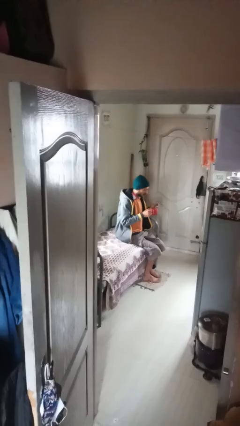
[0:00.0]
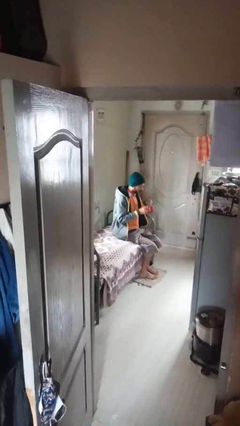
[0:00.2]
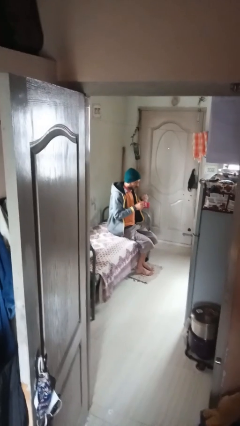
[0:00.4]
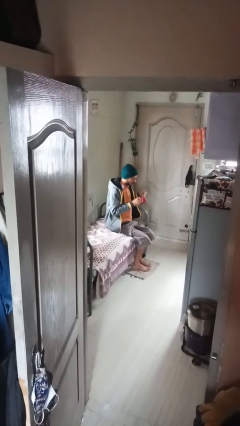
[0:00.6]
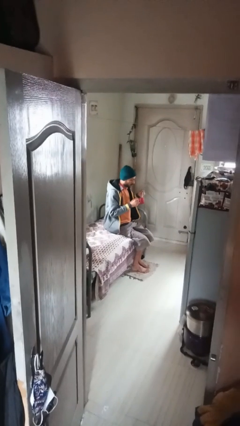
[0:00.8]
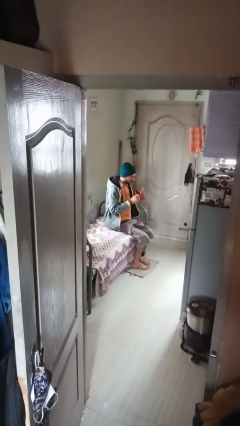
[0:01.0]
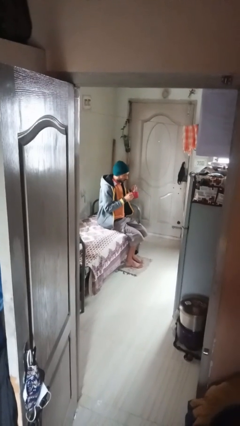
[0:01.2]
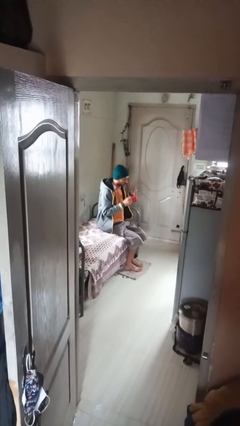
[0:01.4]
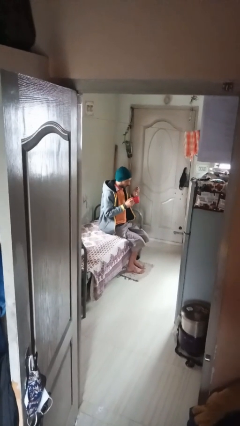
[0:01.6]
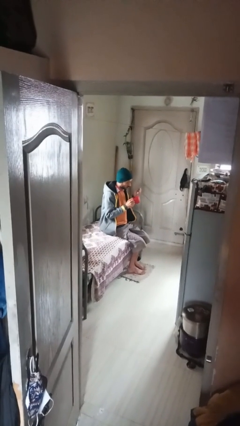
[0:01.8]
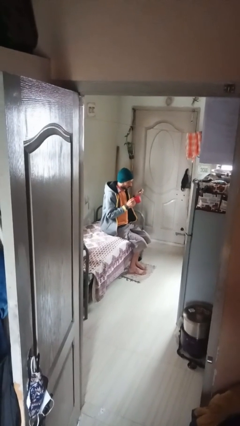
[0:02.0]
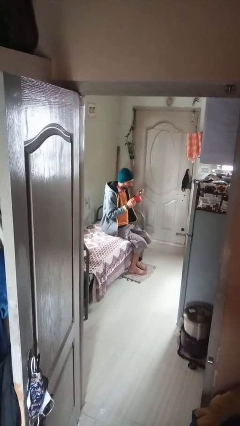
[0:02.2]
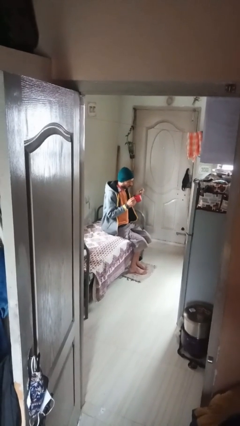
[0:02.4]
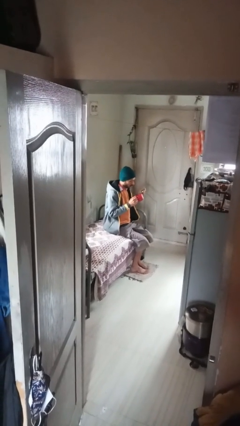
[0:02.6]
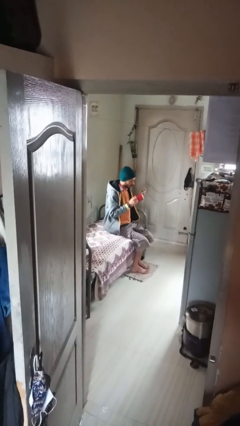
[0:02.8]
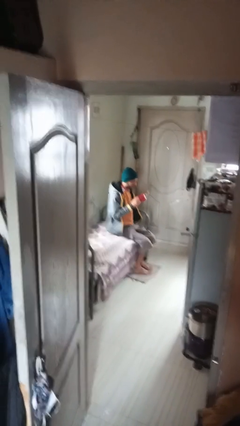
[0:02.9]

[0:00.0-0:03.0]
person stirs mug

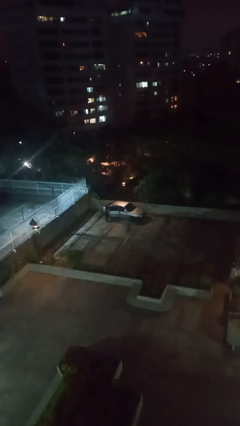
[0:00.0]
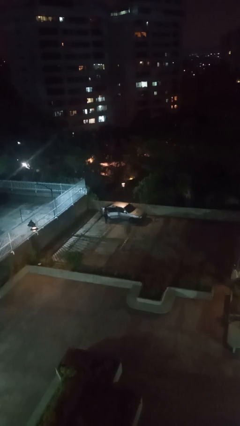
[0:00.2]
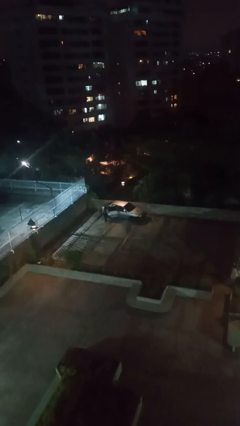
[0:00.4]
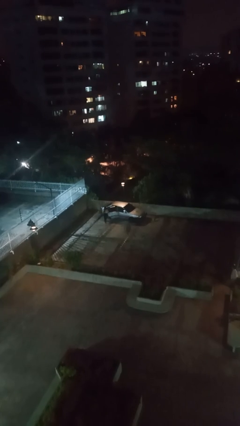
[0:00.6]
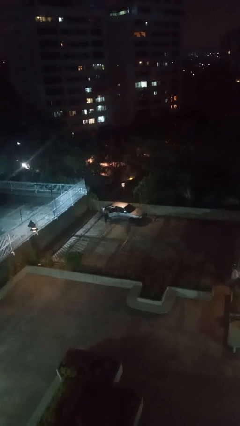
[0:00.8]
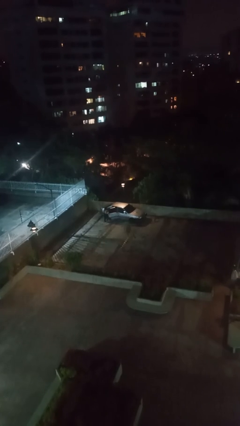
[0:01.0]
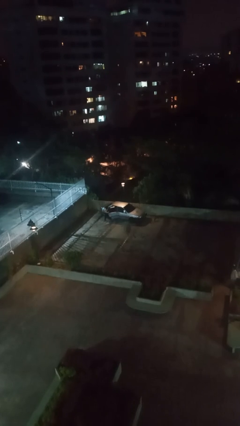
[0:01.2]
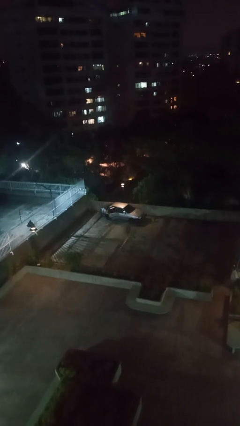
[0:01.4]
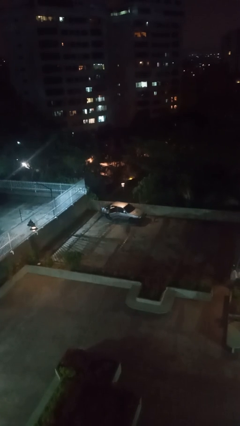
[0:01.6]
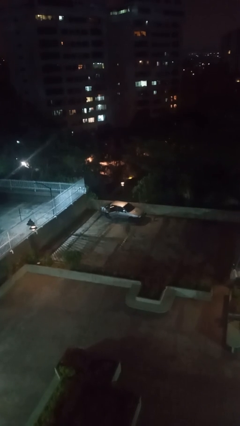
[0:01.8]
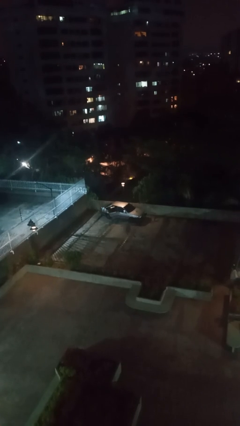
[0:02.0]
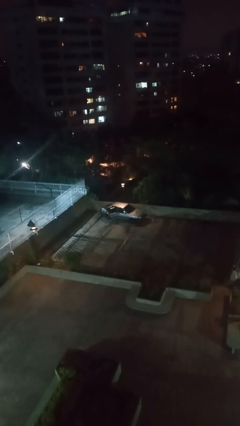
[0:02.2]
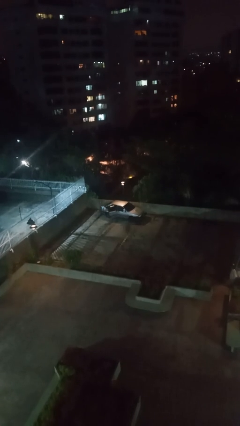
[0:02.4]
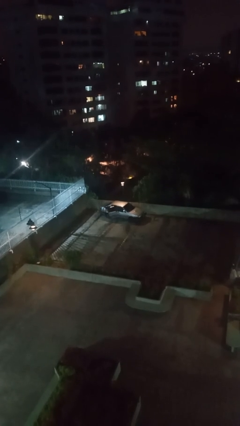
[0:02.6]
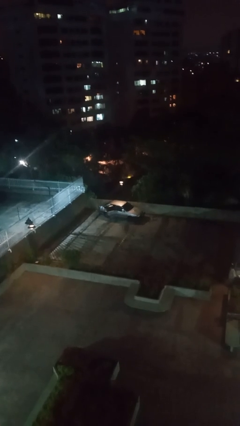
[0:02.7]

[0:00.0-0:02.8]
car picks up person

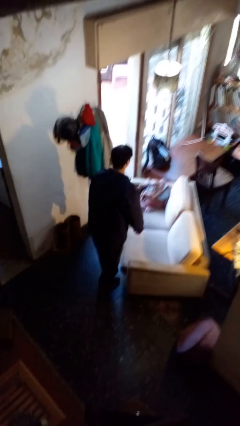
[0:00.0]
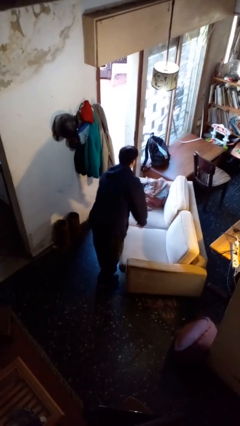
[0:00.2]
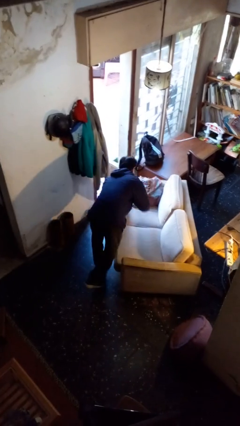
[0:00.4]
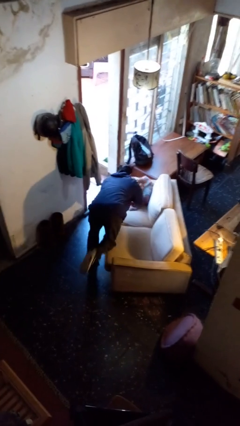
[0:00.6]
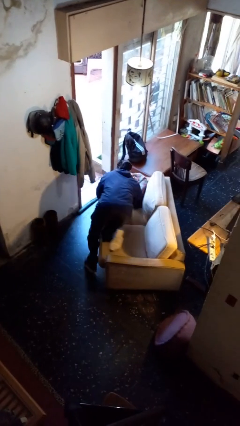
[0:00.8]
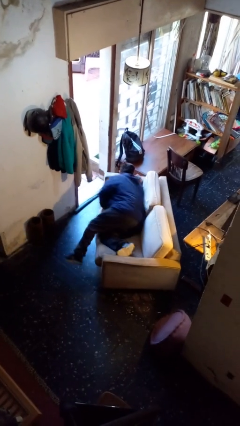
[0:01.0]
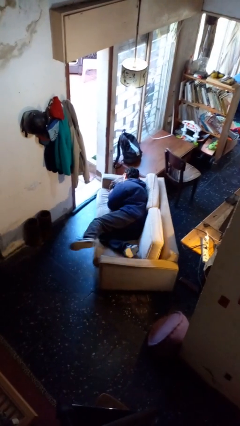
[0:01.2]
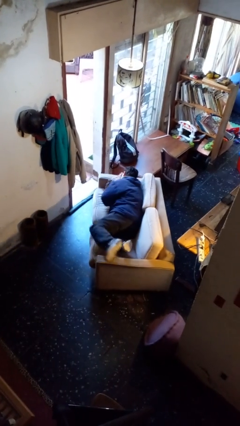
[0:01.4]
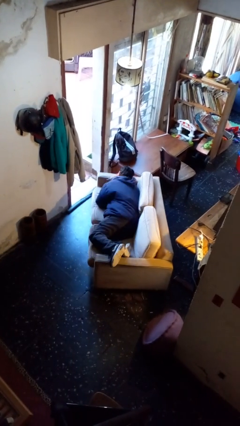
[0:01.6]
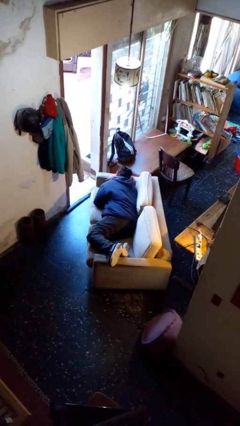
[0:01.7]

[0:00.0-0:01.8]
person lies down on couch

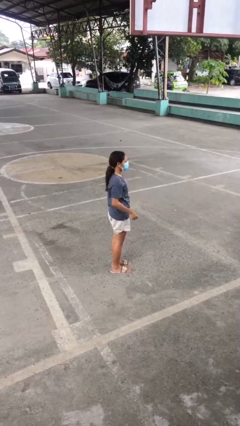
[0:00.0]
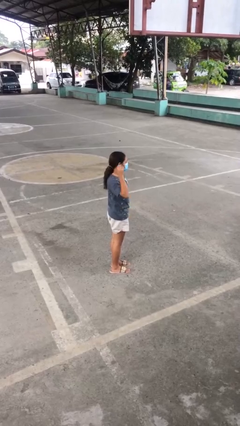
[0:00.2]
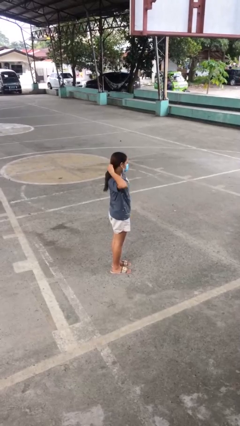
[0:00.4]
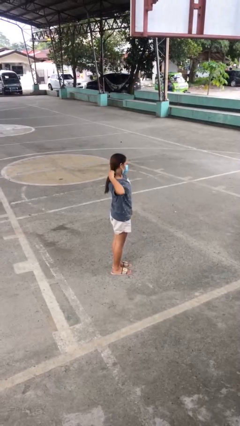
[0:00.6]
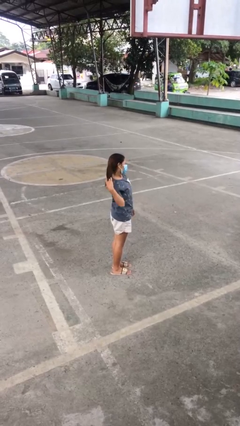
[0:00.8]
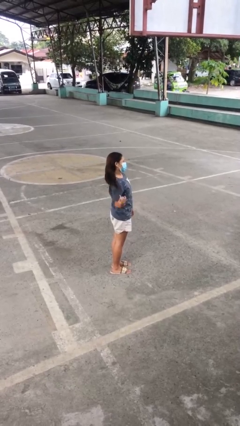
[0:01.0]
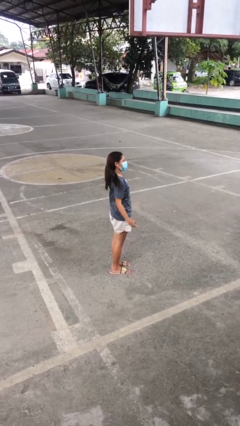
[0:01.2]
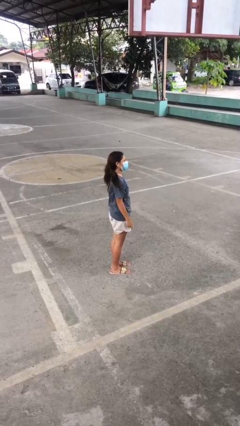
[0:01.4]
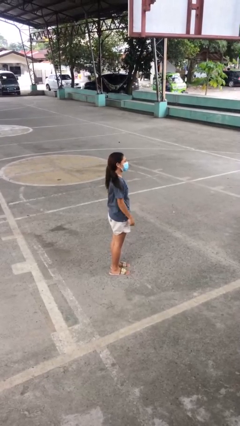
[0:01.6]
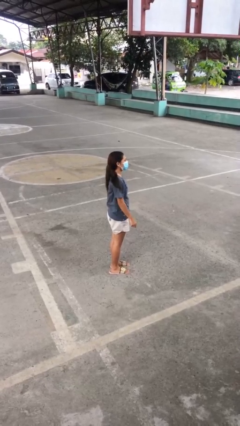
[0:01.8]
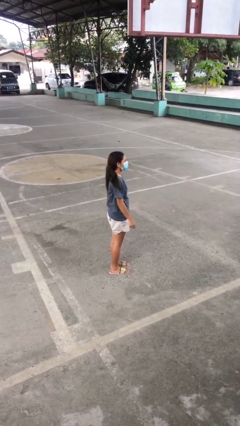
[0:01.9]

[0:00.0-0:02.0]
person takes off hairtie

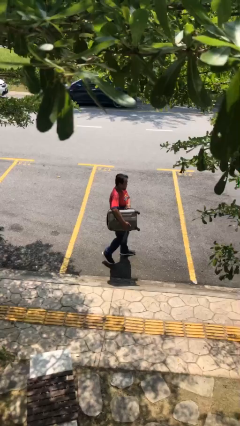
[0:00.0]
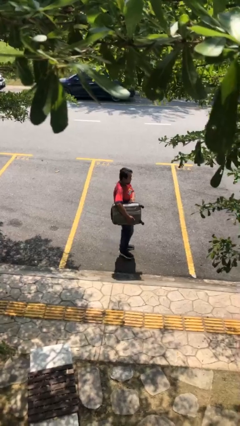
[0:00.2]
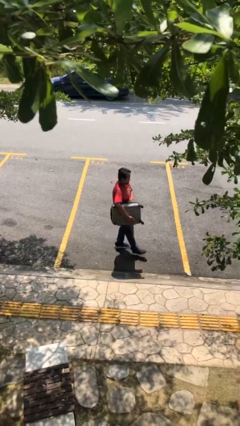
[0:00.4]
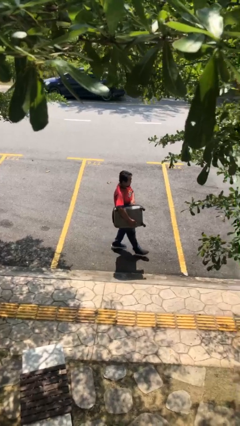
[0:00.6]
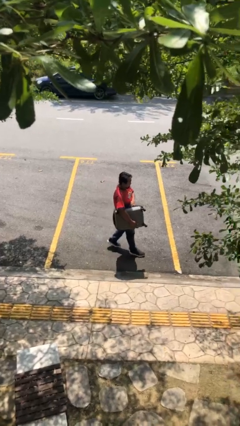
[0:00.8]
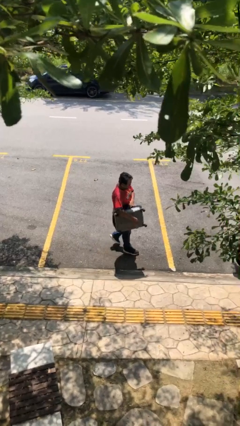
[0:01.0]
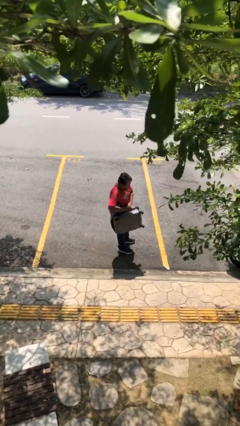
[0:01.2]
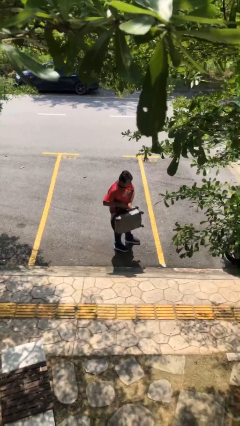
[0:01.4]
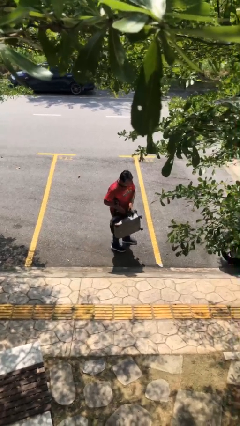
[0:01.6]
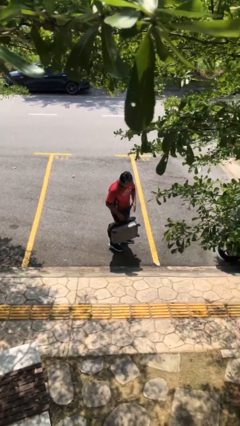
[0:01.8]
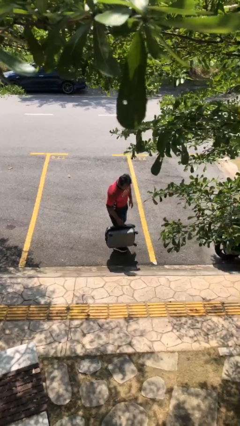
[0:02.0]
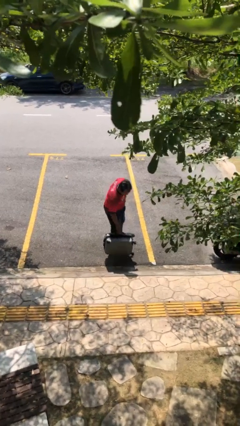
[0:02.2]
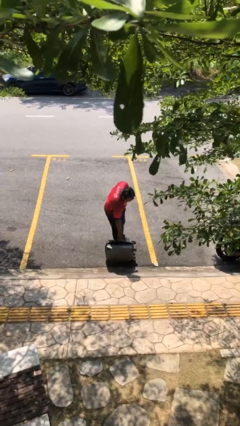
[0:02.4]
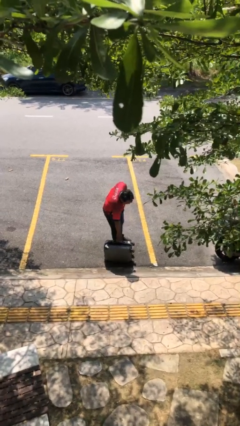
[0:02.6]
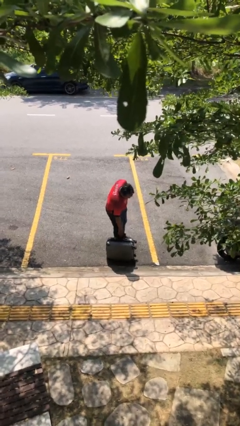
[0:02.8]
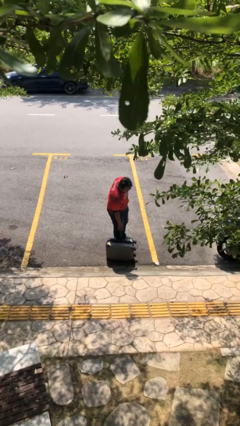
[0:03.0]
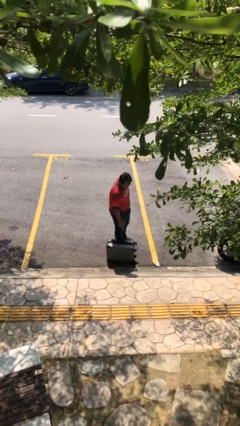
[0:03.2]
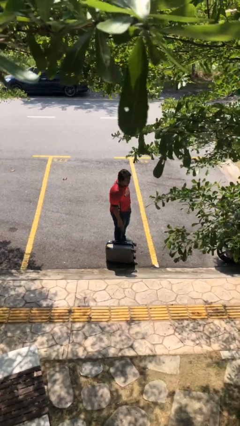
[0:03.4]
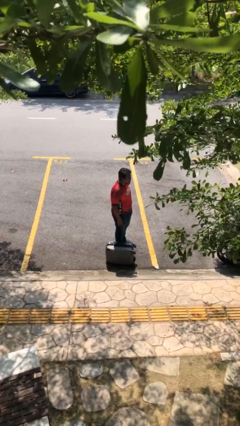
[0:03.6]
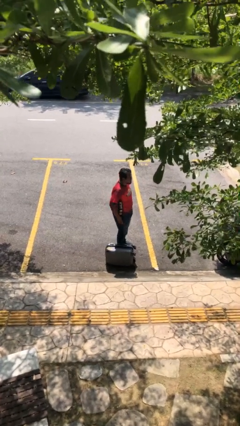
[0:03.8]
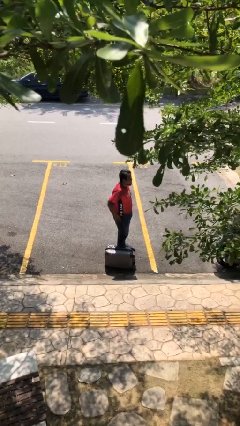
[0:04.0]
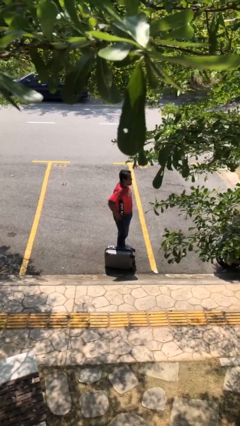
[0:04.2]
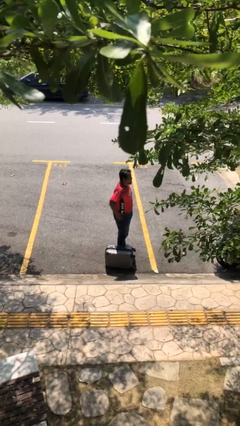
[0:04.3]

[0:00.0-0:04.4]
person puts down object on floor

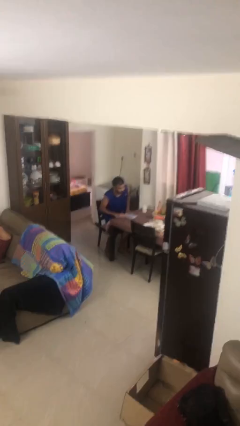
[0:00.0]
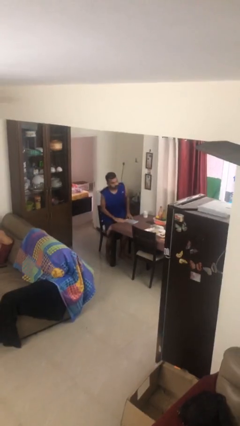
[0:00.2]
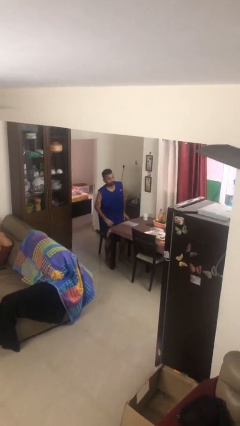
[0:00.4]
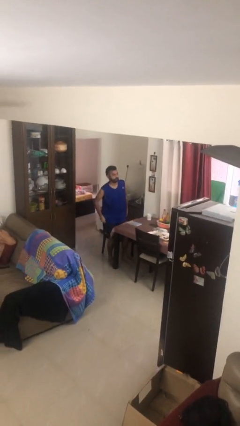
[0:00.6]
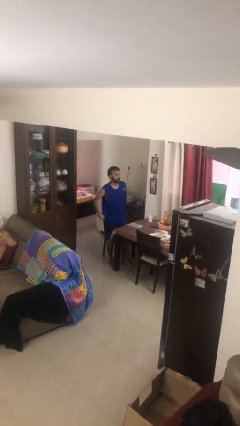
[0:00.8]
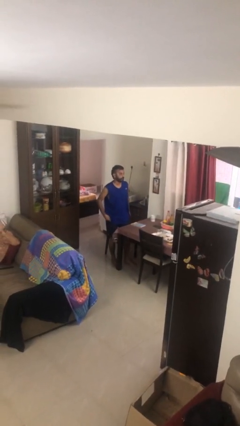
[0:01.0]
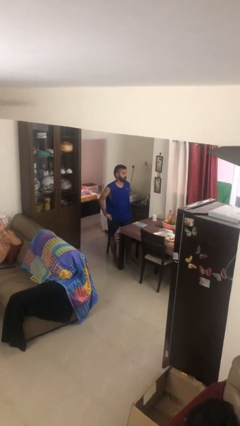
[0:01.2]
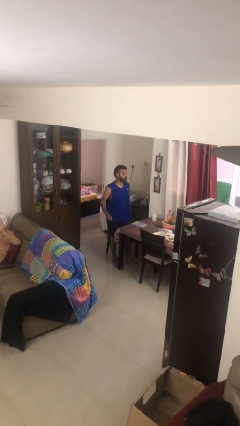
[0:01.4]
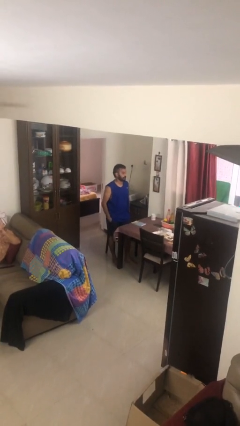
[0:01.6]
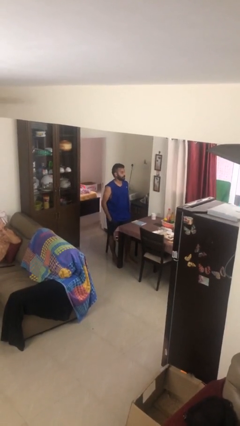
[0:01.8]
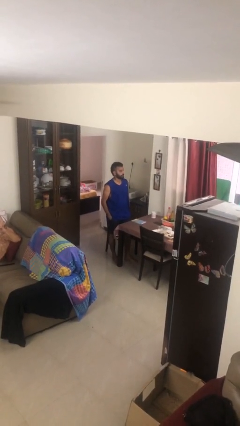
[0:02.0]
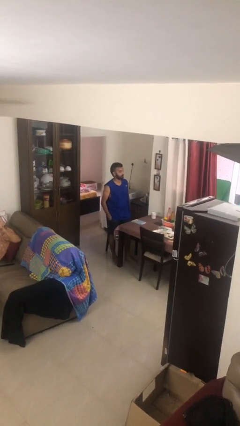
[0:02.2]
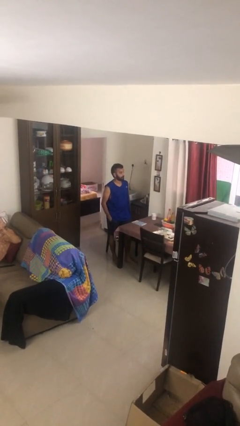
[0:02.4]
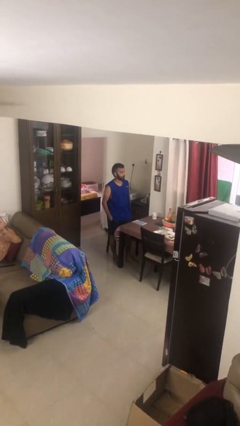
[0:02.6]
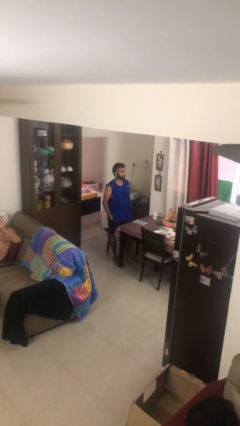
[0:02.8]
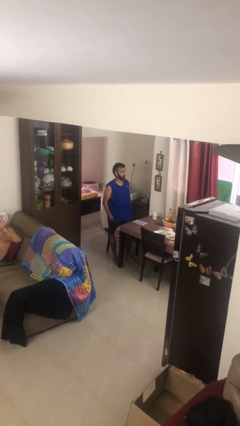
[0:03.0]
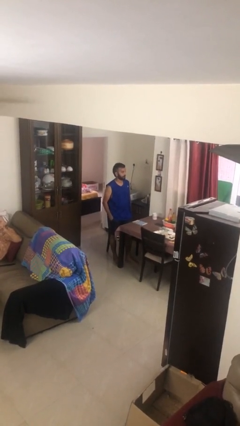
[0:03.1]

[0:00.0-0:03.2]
person stands up
